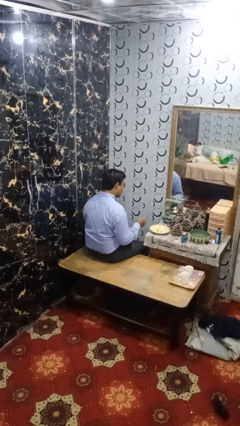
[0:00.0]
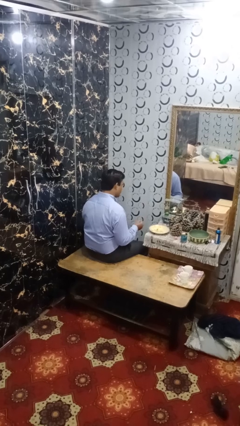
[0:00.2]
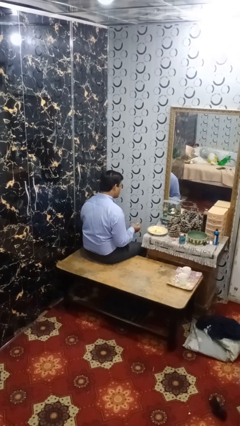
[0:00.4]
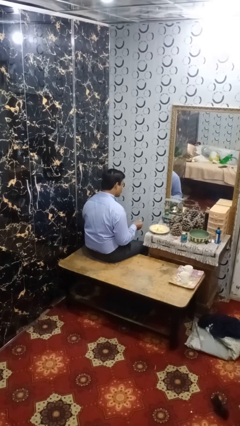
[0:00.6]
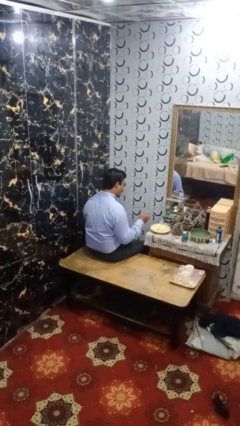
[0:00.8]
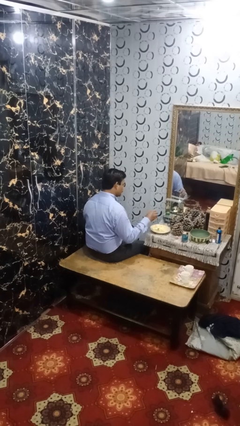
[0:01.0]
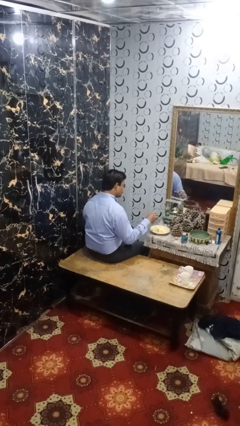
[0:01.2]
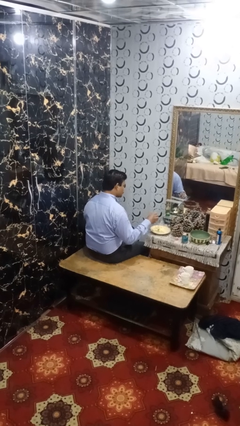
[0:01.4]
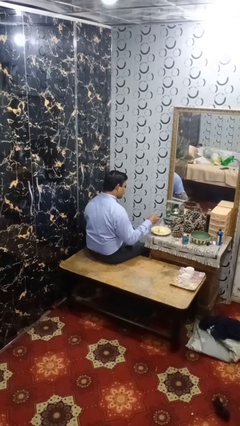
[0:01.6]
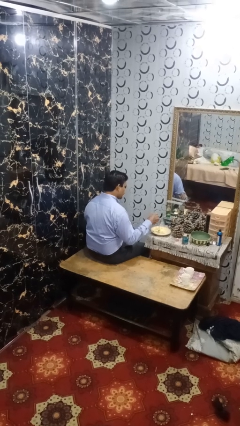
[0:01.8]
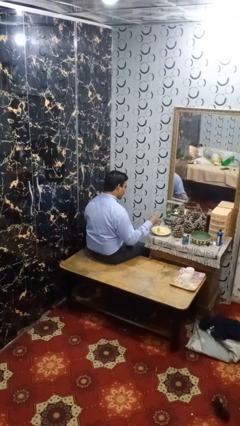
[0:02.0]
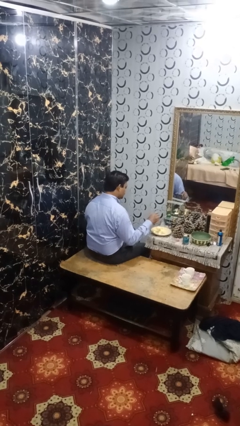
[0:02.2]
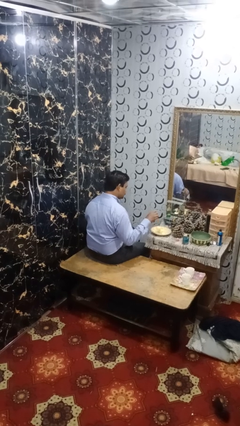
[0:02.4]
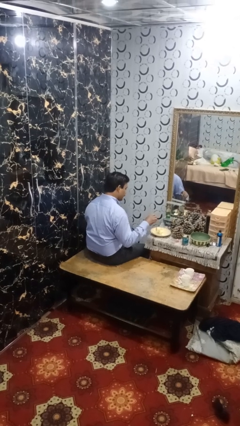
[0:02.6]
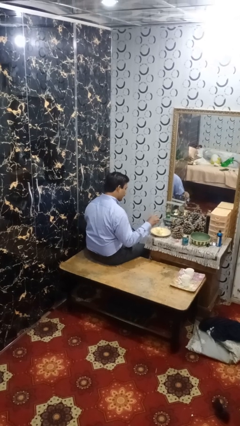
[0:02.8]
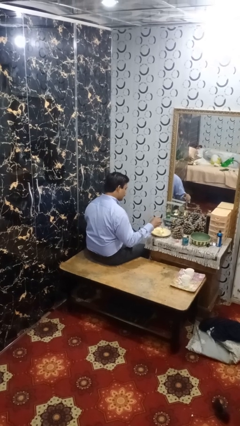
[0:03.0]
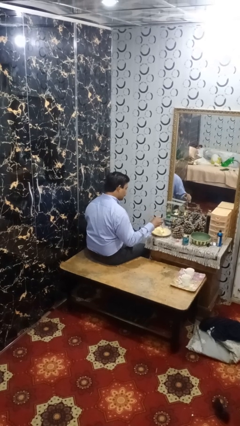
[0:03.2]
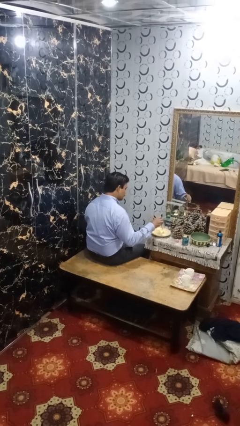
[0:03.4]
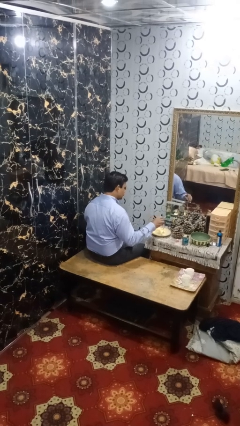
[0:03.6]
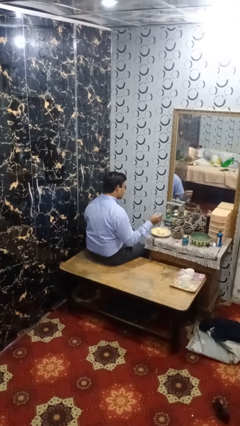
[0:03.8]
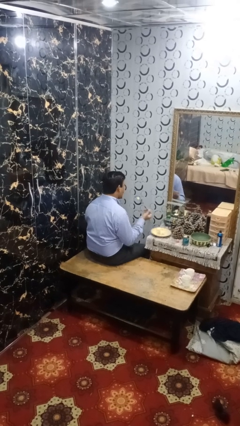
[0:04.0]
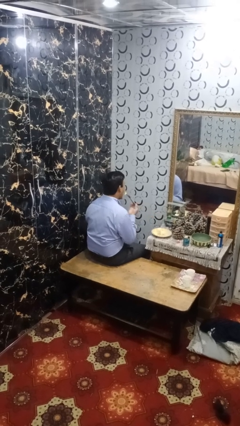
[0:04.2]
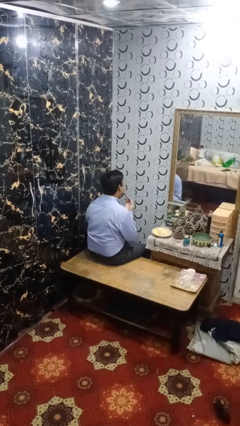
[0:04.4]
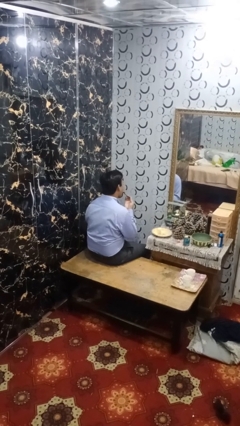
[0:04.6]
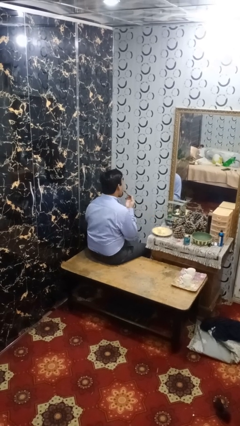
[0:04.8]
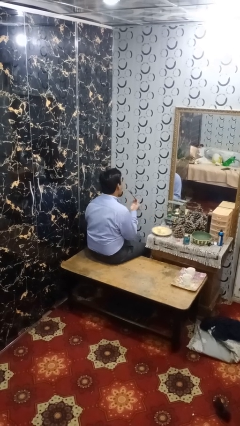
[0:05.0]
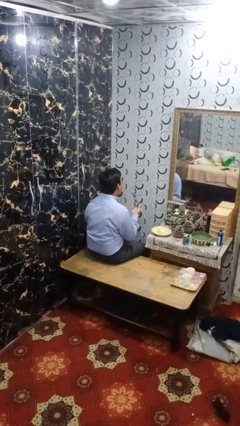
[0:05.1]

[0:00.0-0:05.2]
person eats with utensil

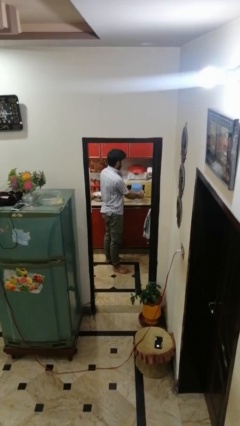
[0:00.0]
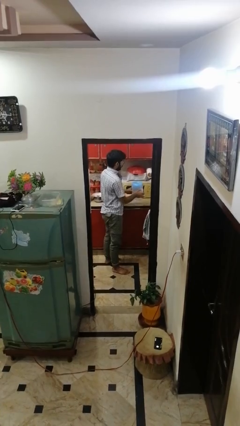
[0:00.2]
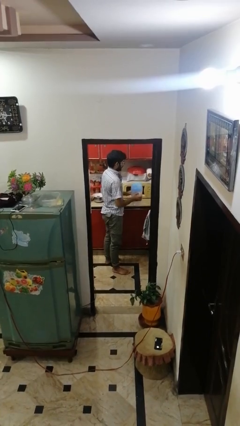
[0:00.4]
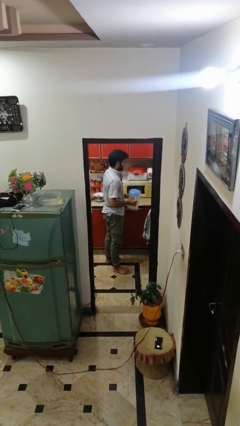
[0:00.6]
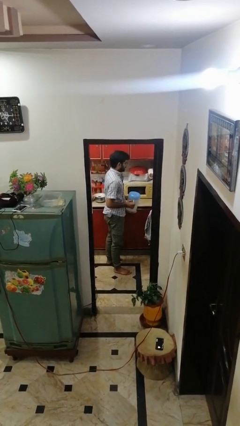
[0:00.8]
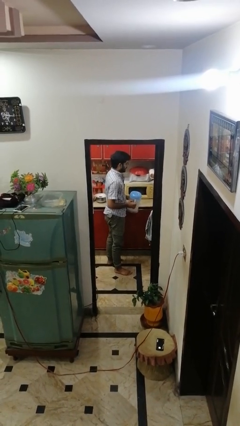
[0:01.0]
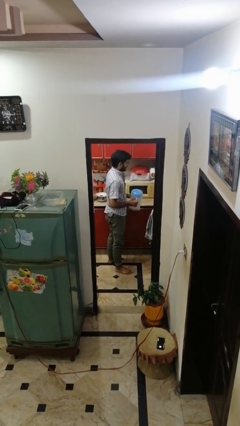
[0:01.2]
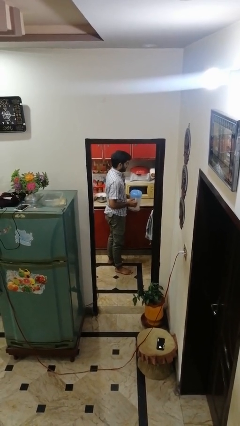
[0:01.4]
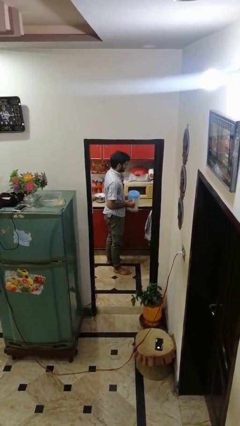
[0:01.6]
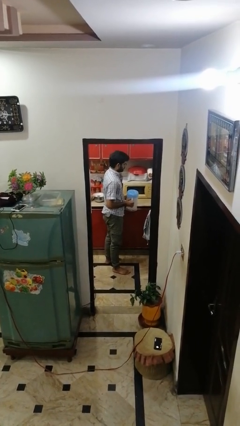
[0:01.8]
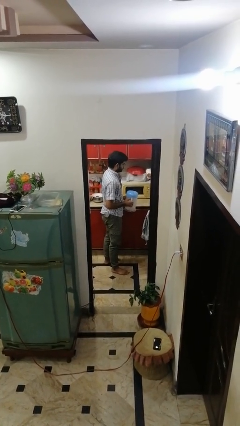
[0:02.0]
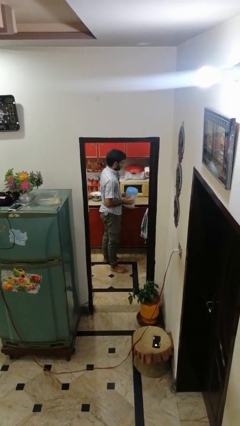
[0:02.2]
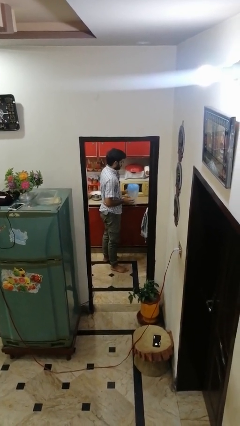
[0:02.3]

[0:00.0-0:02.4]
person picks up object from countertop

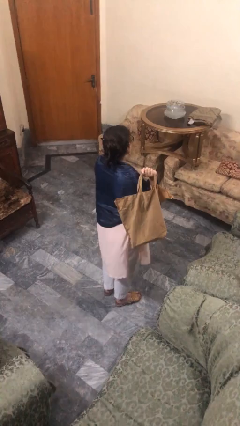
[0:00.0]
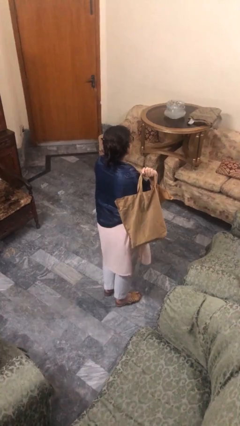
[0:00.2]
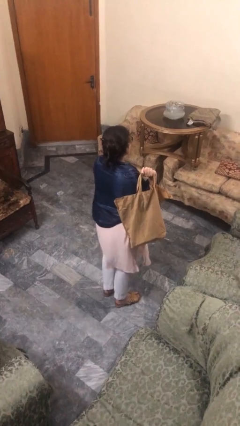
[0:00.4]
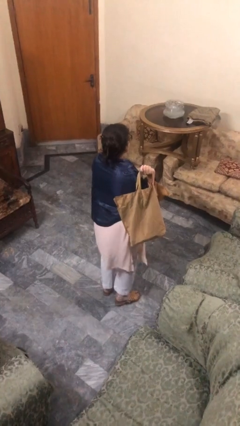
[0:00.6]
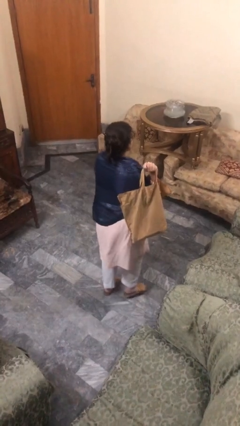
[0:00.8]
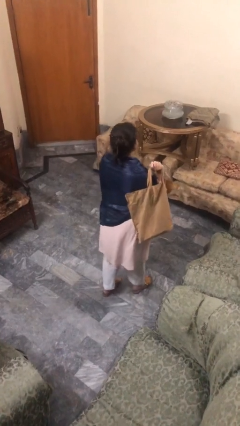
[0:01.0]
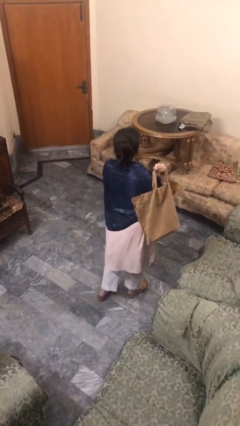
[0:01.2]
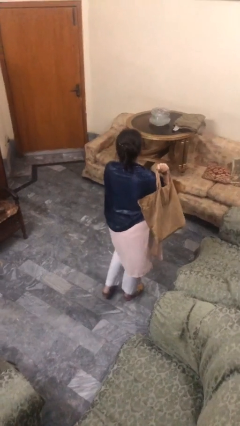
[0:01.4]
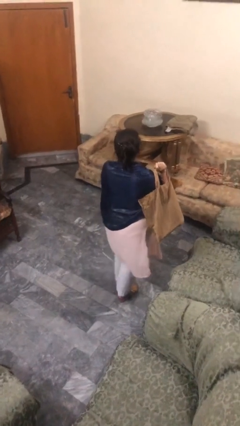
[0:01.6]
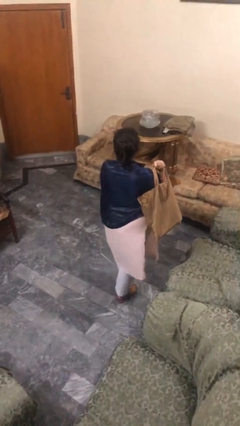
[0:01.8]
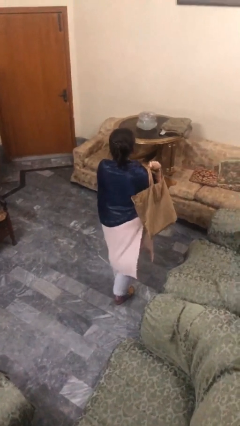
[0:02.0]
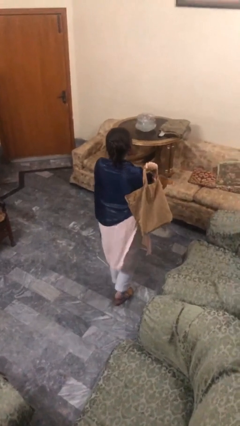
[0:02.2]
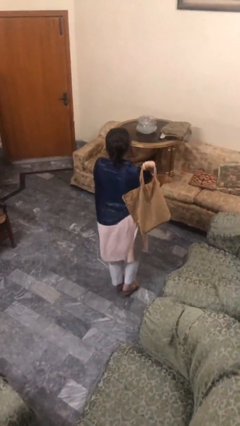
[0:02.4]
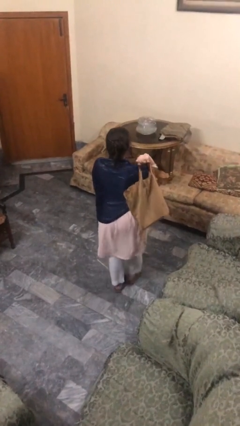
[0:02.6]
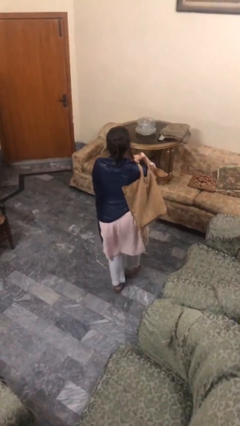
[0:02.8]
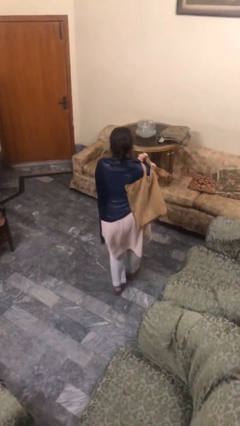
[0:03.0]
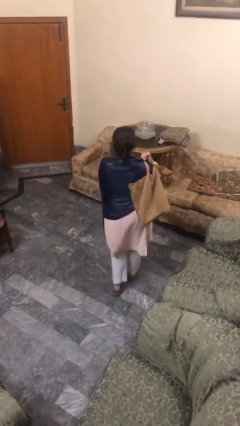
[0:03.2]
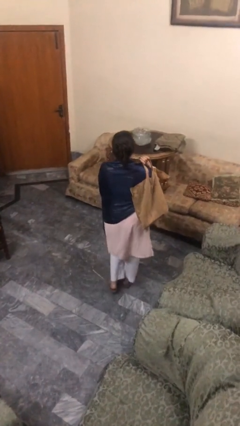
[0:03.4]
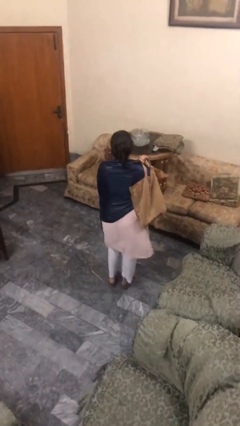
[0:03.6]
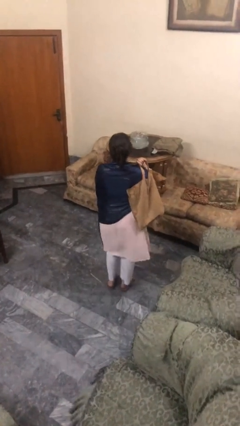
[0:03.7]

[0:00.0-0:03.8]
person carries groceries

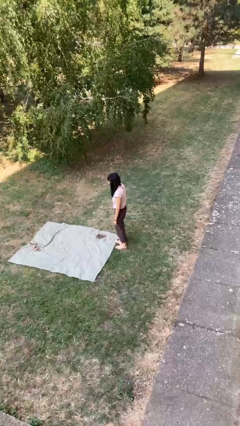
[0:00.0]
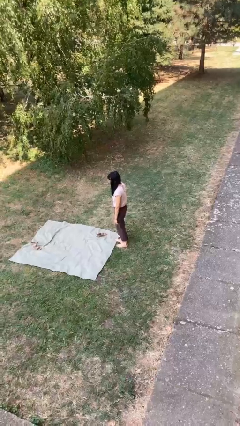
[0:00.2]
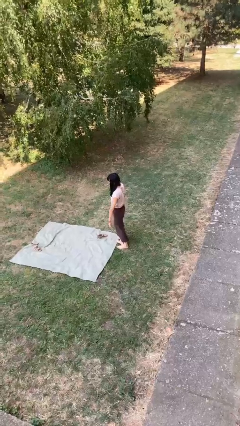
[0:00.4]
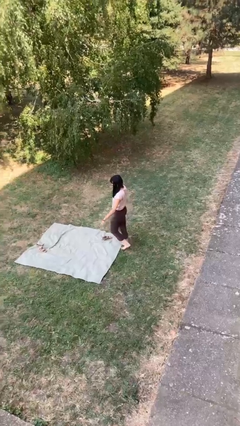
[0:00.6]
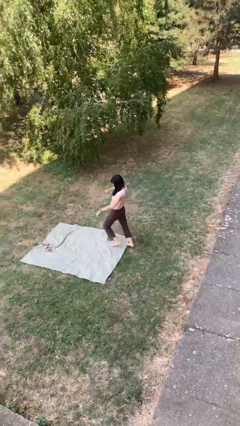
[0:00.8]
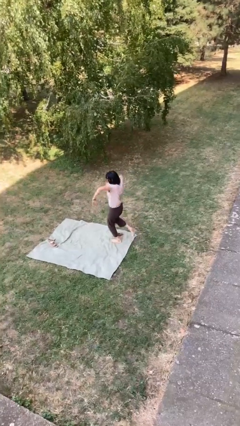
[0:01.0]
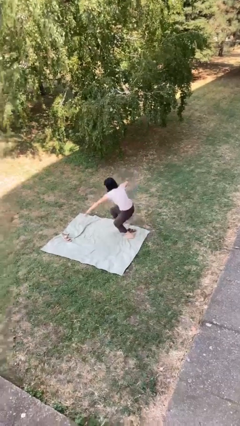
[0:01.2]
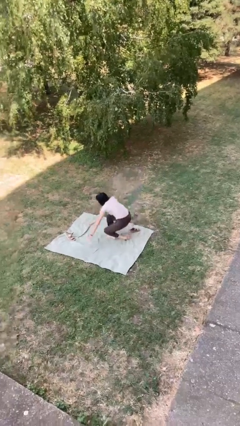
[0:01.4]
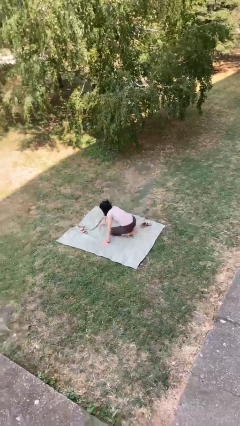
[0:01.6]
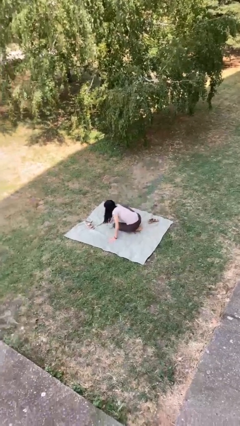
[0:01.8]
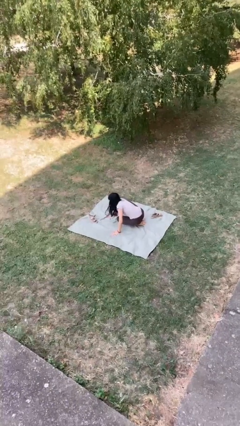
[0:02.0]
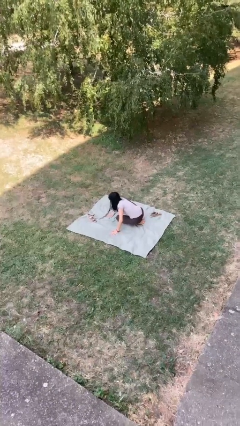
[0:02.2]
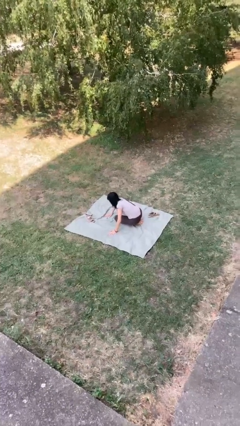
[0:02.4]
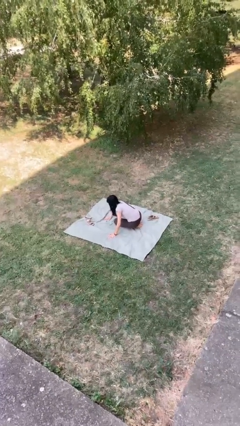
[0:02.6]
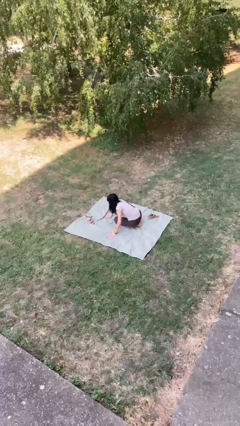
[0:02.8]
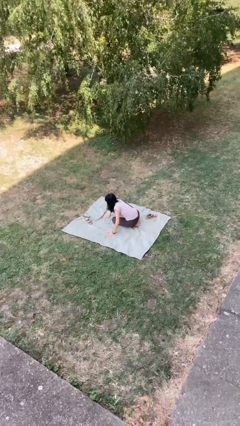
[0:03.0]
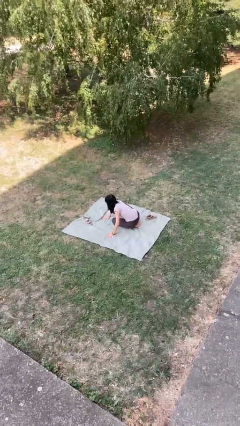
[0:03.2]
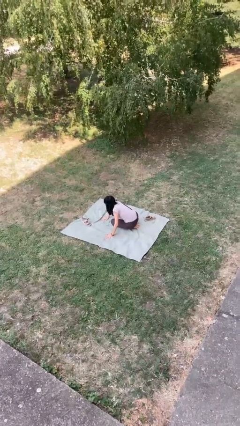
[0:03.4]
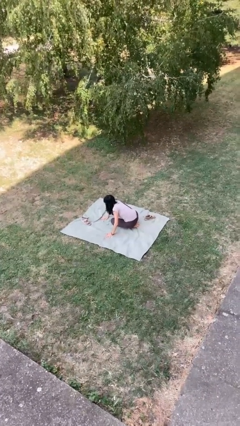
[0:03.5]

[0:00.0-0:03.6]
person trips on object on floor

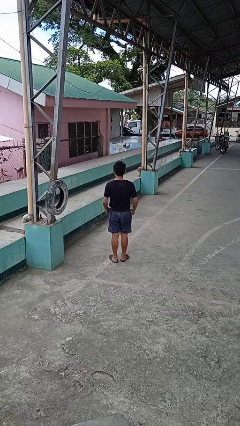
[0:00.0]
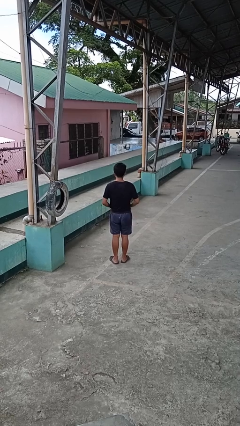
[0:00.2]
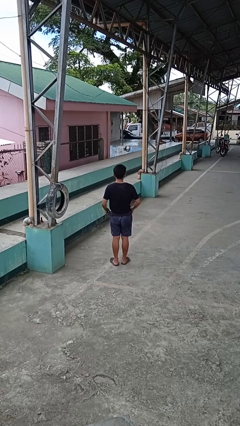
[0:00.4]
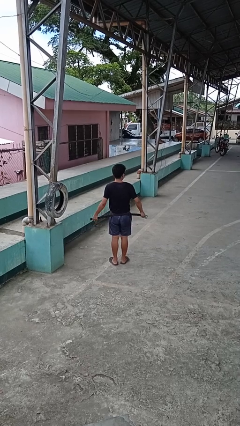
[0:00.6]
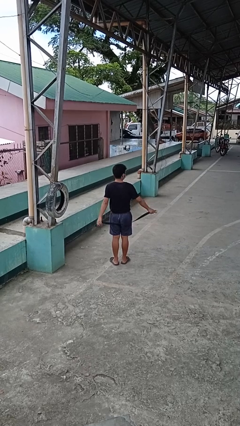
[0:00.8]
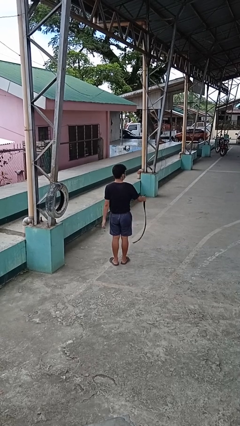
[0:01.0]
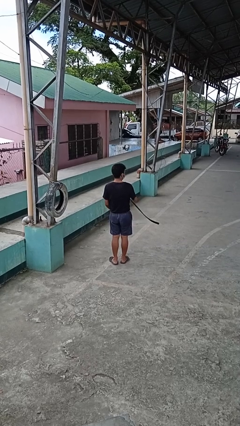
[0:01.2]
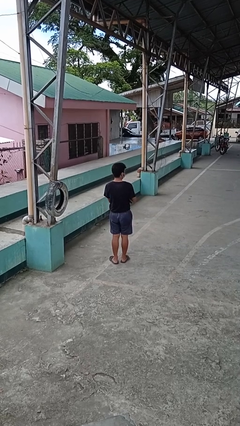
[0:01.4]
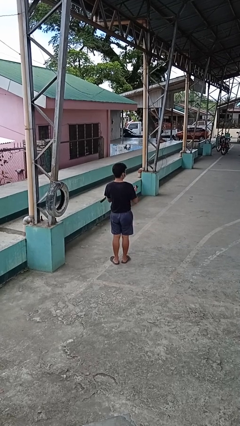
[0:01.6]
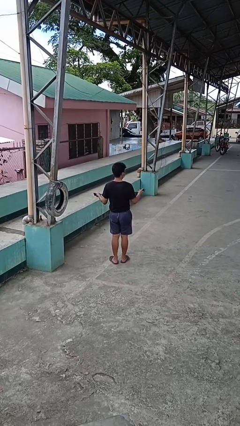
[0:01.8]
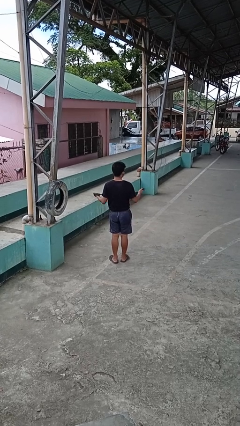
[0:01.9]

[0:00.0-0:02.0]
person takes off belt
